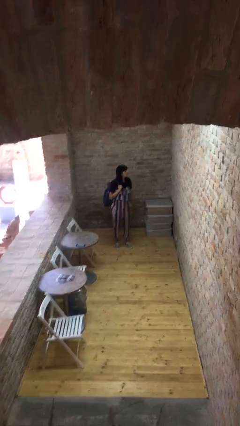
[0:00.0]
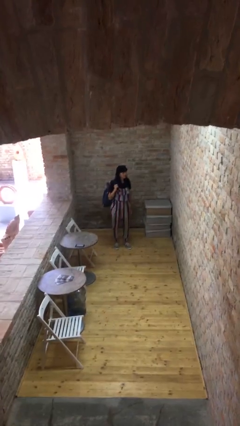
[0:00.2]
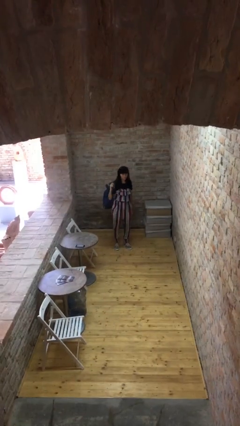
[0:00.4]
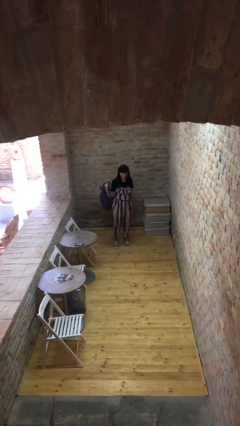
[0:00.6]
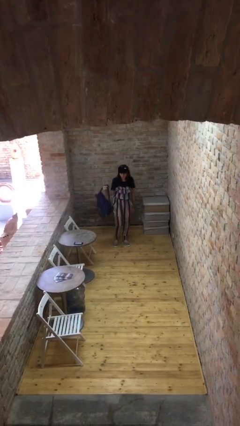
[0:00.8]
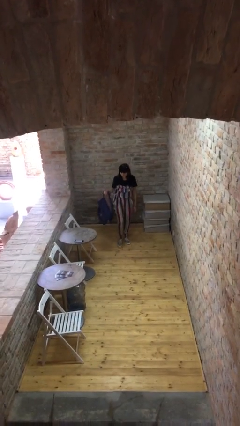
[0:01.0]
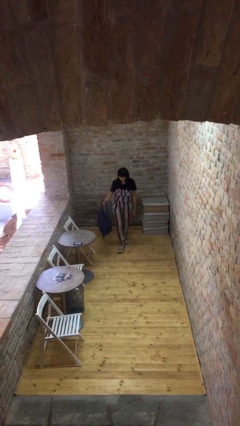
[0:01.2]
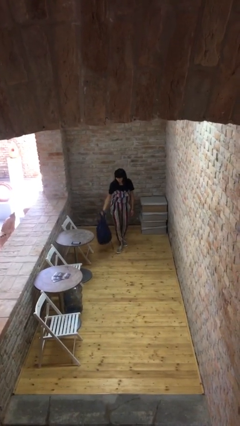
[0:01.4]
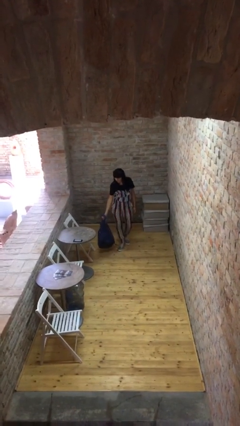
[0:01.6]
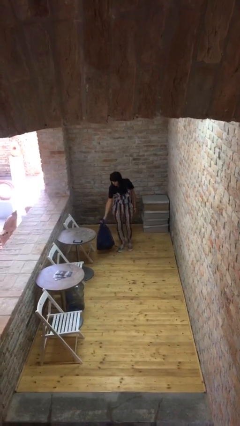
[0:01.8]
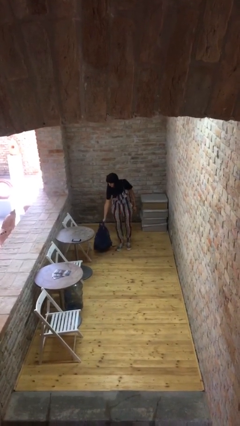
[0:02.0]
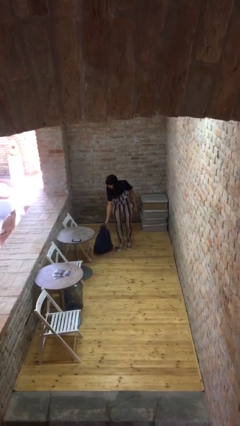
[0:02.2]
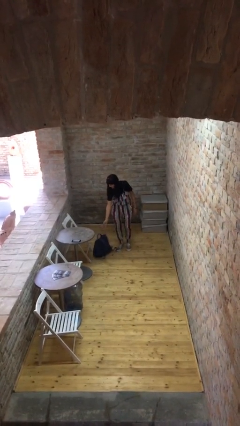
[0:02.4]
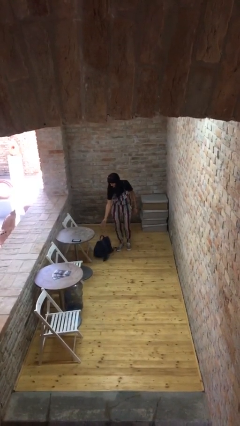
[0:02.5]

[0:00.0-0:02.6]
person puts down object on floor

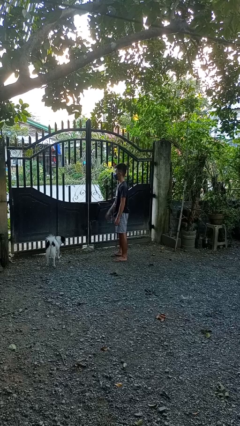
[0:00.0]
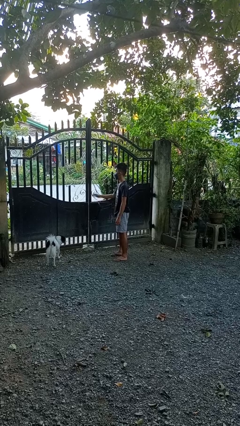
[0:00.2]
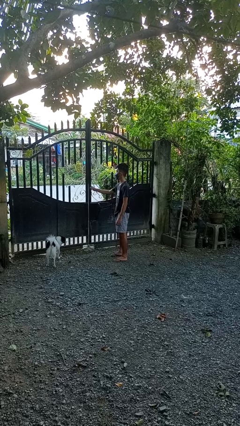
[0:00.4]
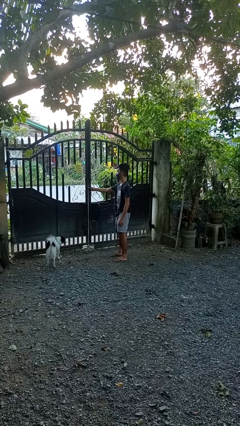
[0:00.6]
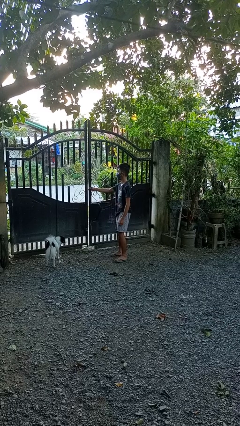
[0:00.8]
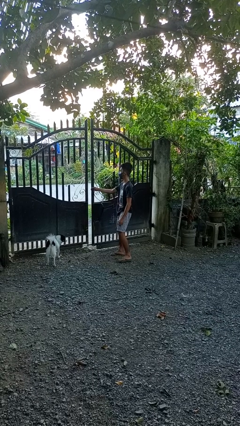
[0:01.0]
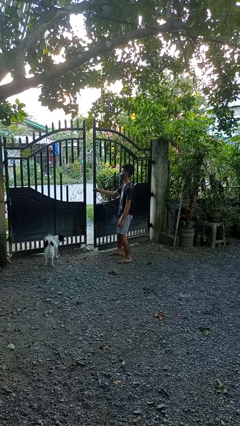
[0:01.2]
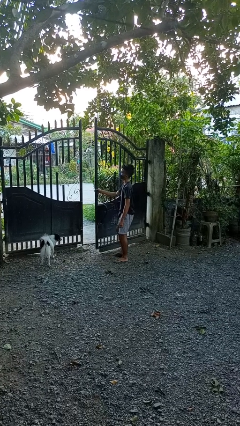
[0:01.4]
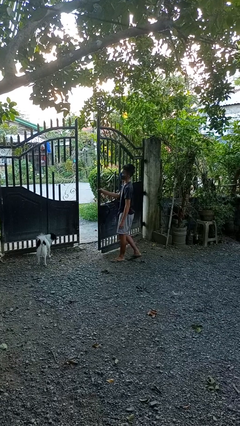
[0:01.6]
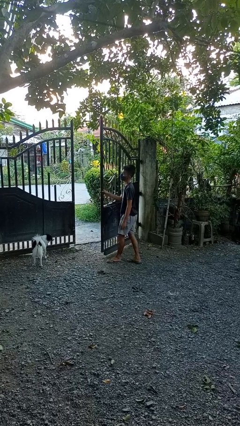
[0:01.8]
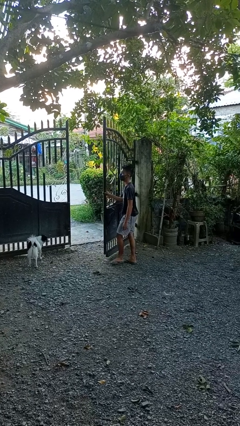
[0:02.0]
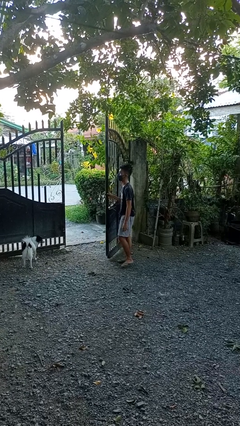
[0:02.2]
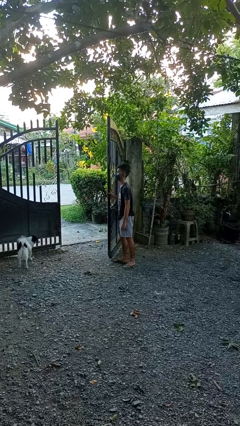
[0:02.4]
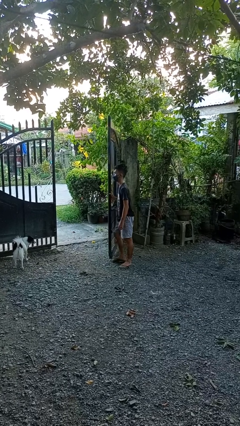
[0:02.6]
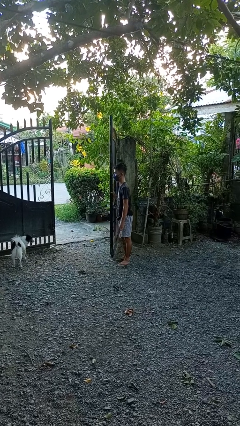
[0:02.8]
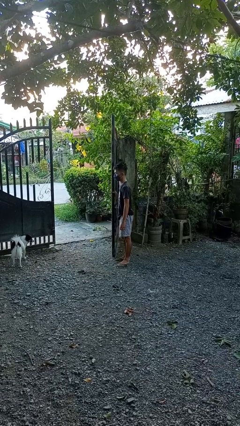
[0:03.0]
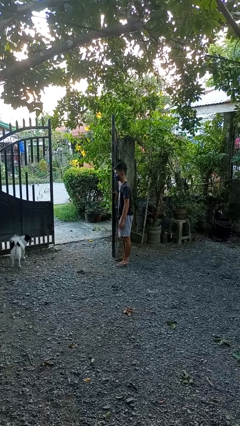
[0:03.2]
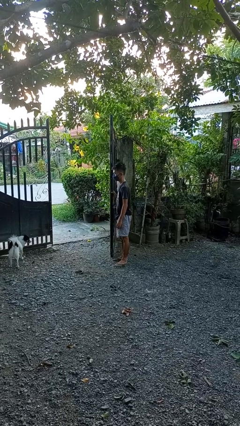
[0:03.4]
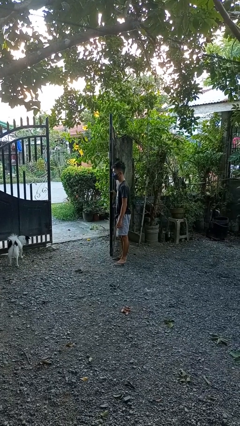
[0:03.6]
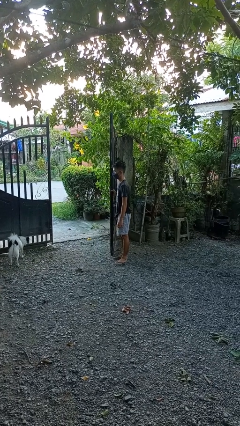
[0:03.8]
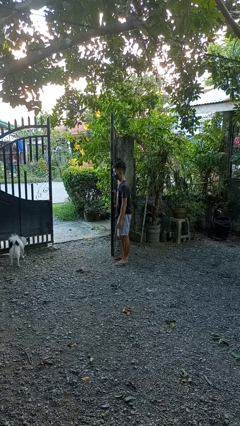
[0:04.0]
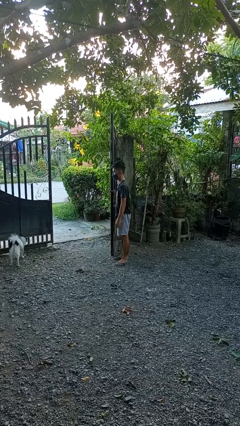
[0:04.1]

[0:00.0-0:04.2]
person opens gate

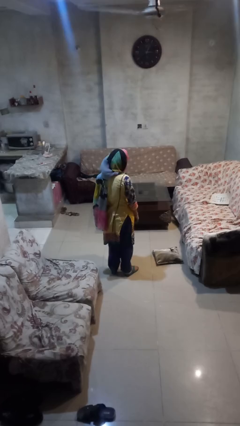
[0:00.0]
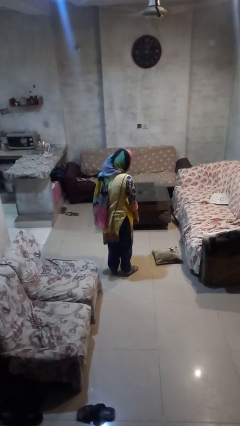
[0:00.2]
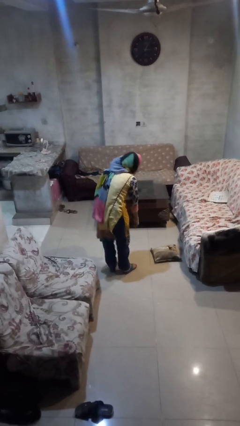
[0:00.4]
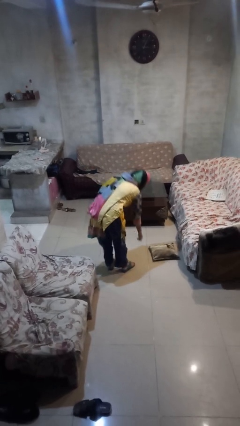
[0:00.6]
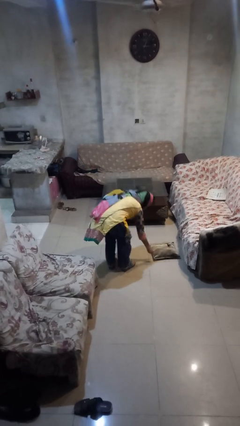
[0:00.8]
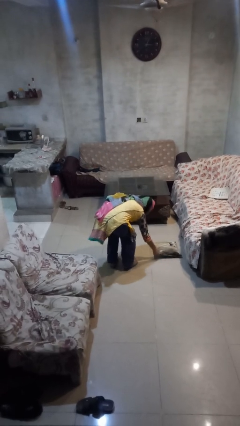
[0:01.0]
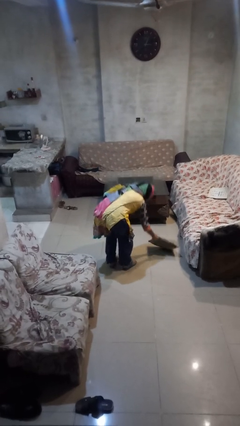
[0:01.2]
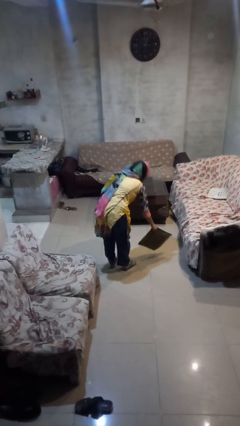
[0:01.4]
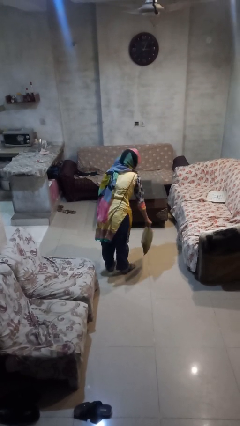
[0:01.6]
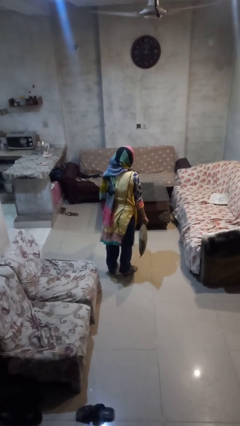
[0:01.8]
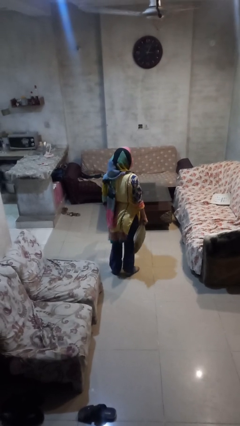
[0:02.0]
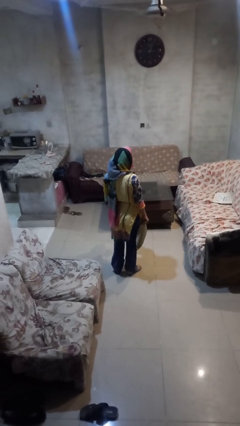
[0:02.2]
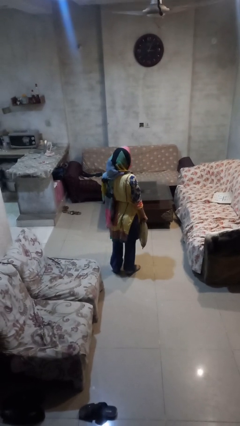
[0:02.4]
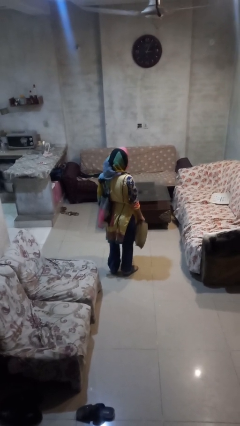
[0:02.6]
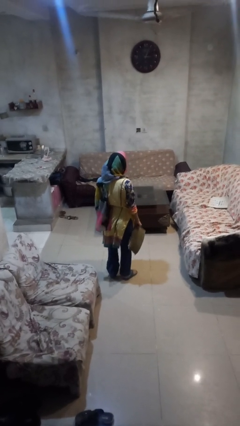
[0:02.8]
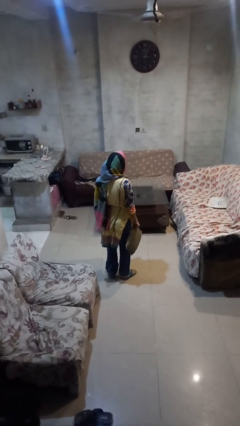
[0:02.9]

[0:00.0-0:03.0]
person picks up object from floor

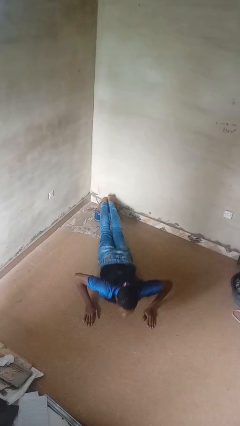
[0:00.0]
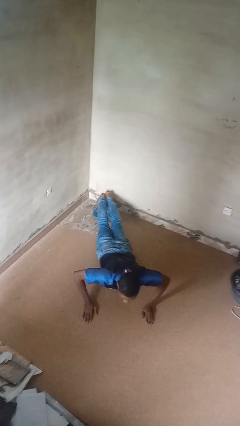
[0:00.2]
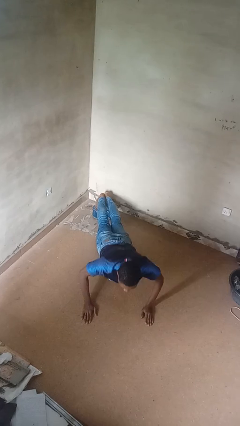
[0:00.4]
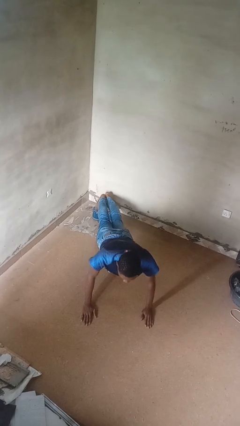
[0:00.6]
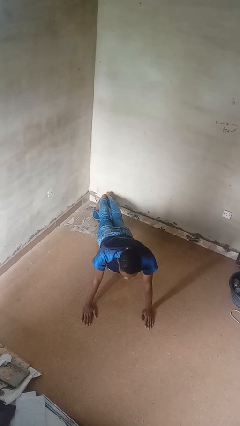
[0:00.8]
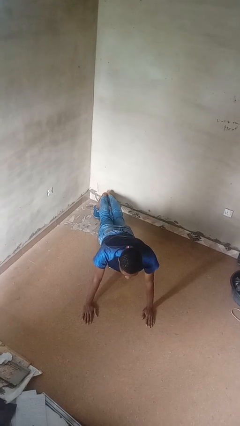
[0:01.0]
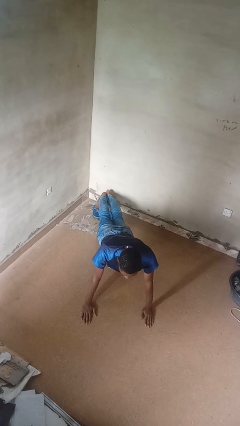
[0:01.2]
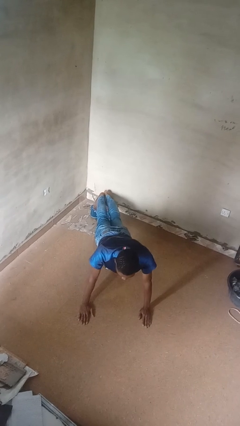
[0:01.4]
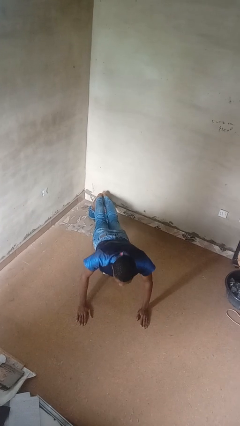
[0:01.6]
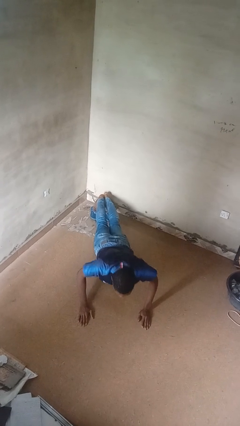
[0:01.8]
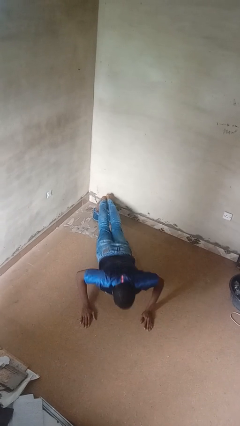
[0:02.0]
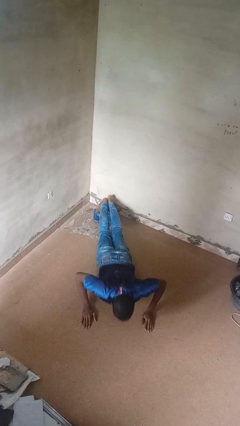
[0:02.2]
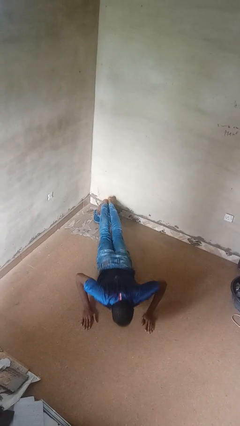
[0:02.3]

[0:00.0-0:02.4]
person exercises with pushup

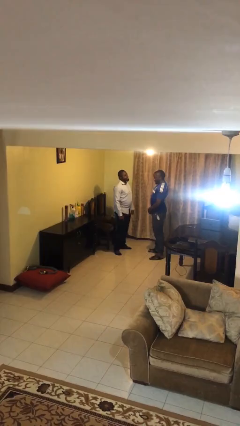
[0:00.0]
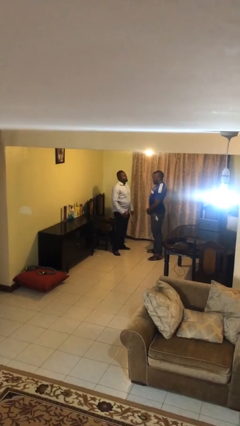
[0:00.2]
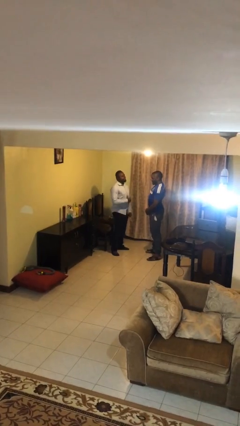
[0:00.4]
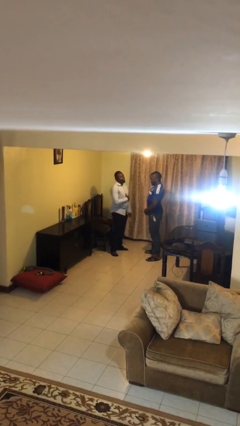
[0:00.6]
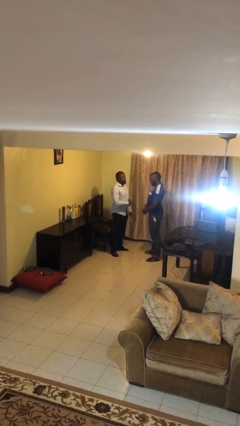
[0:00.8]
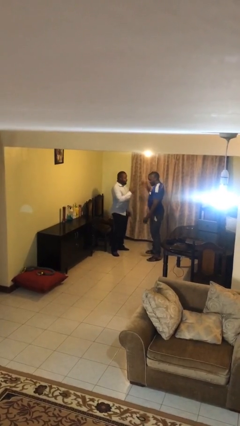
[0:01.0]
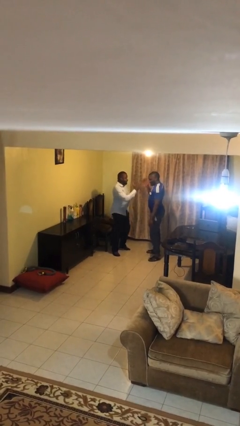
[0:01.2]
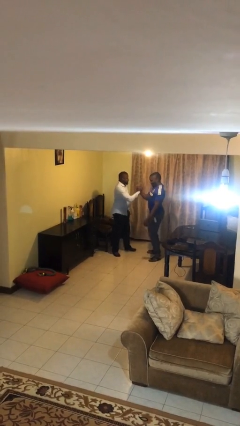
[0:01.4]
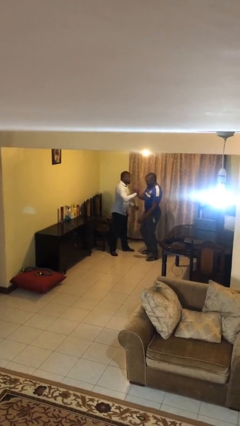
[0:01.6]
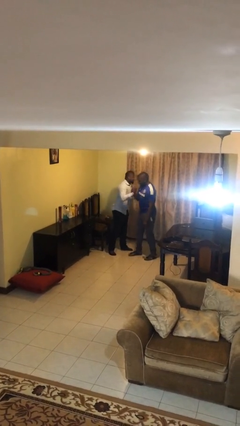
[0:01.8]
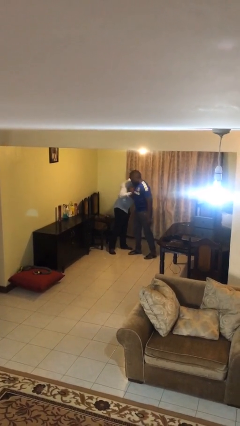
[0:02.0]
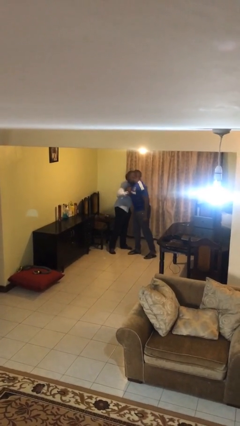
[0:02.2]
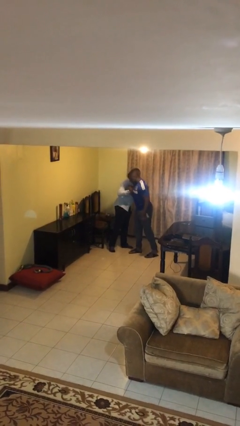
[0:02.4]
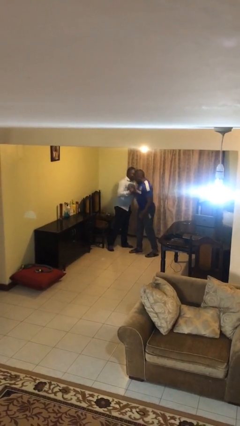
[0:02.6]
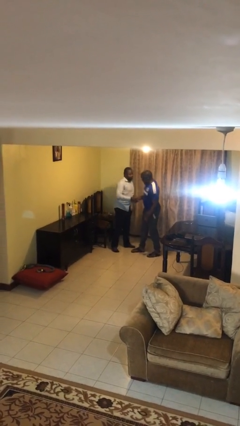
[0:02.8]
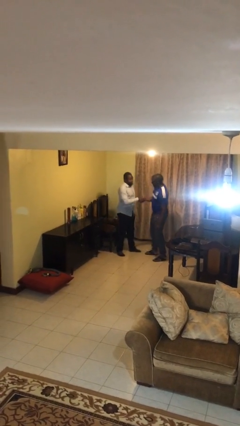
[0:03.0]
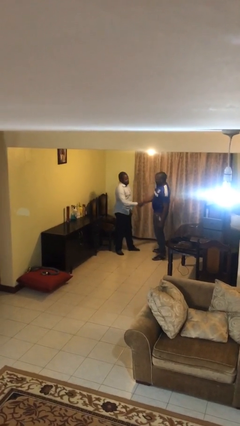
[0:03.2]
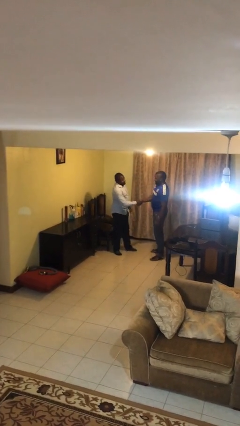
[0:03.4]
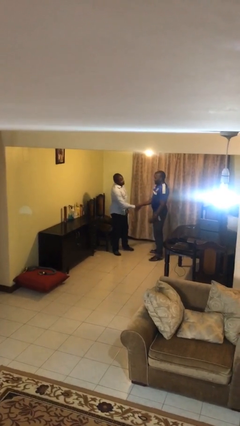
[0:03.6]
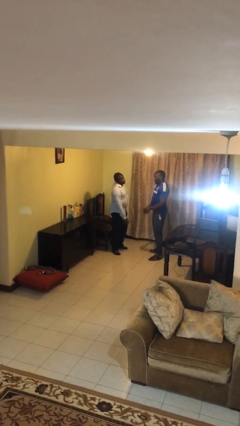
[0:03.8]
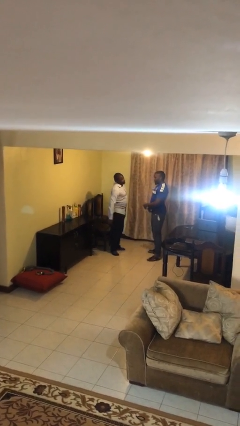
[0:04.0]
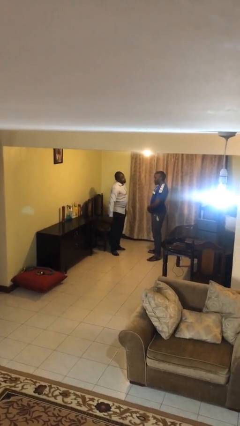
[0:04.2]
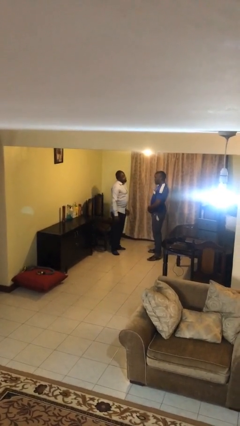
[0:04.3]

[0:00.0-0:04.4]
person embraces person

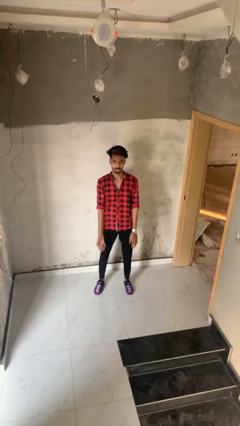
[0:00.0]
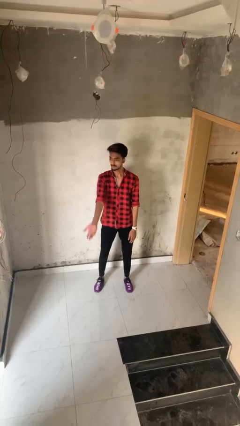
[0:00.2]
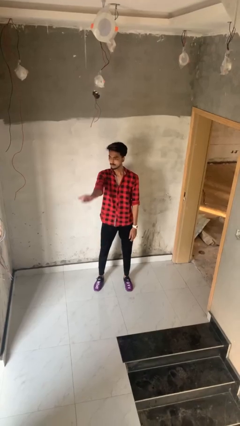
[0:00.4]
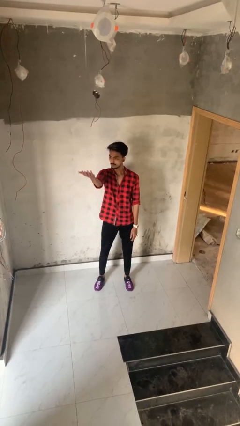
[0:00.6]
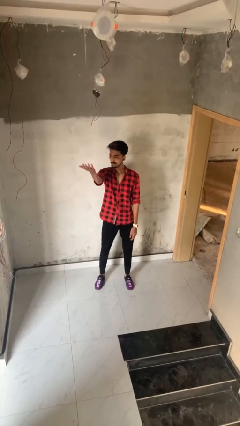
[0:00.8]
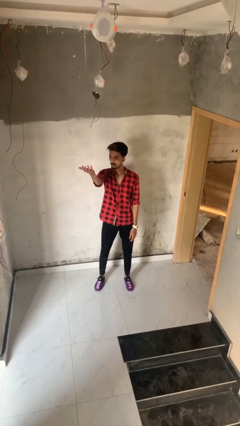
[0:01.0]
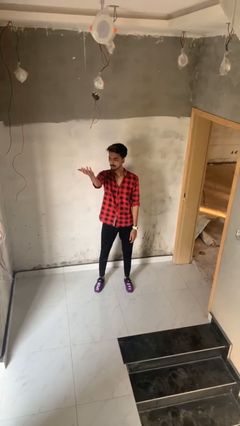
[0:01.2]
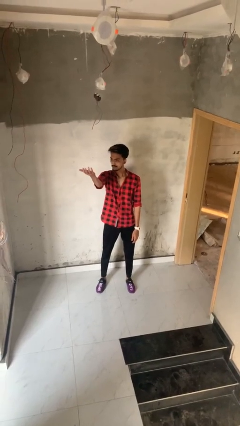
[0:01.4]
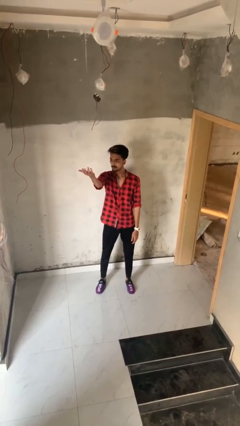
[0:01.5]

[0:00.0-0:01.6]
person gestures swipe up
